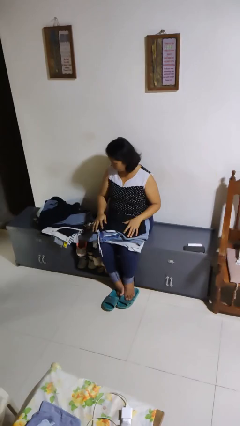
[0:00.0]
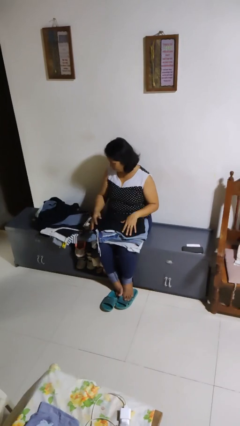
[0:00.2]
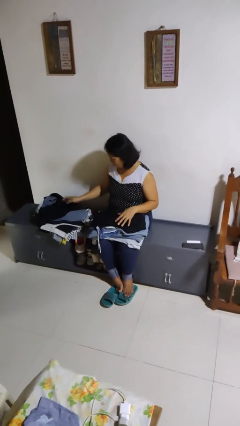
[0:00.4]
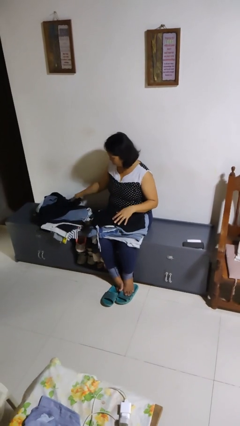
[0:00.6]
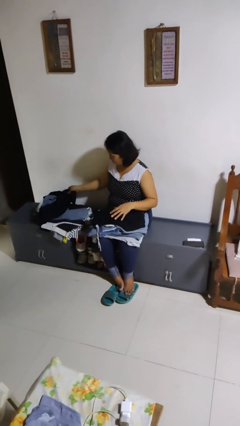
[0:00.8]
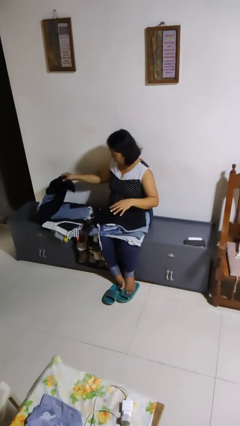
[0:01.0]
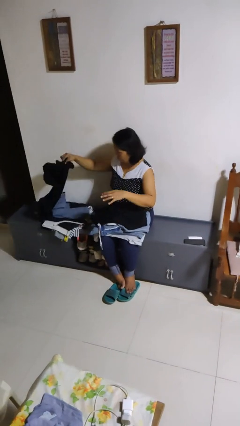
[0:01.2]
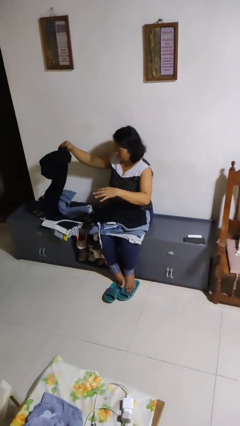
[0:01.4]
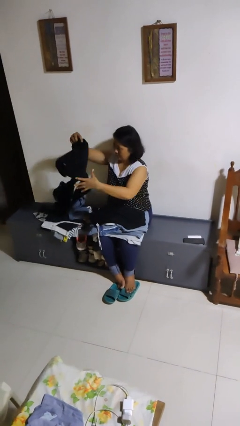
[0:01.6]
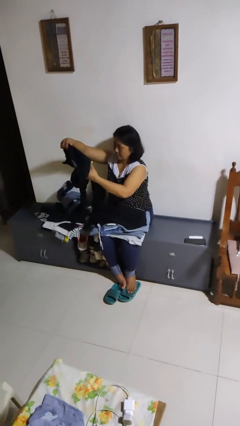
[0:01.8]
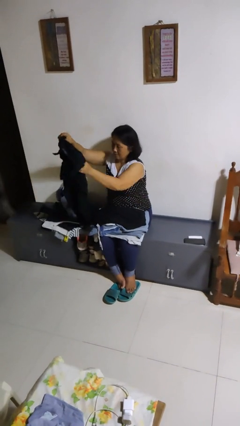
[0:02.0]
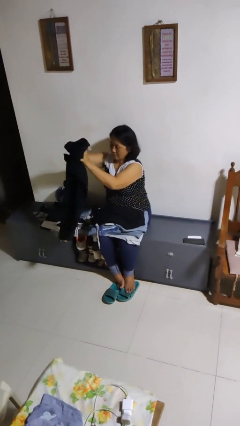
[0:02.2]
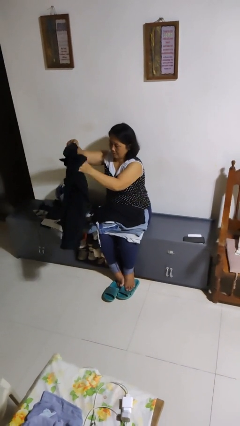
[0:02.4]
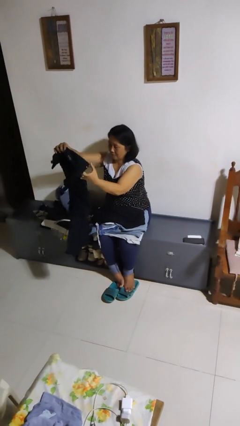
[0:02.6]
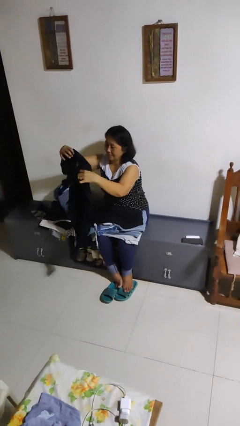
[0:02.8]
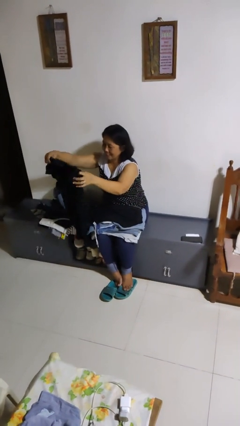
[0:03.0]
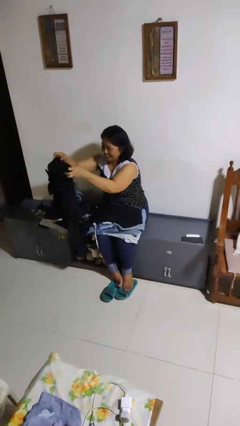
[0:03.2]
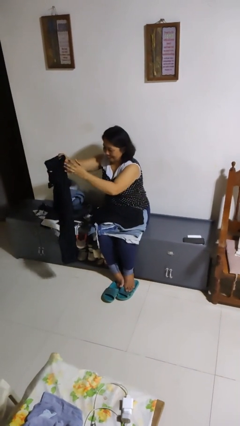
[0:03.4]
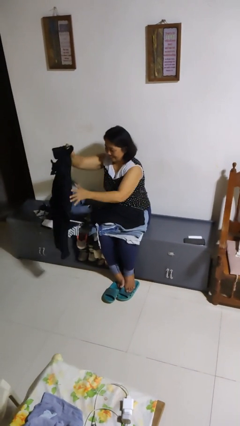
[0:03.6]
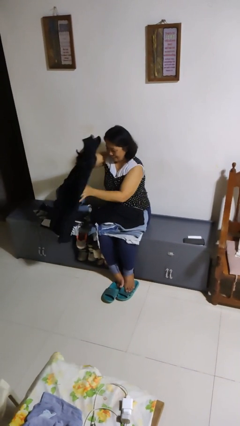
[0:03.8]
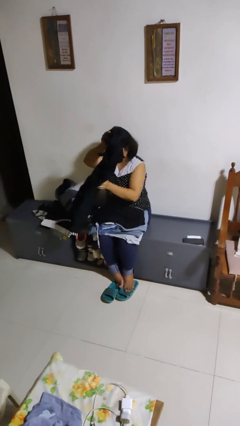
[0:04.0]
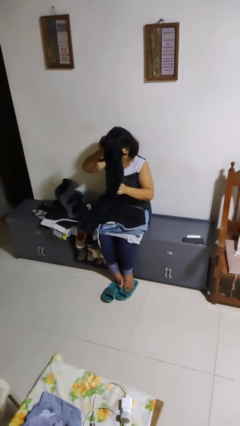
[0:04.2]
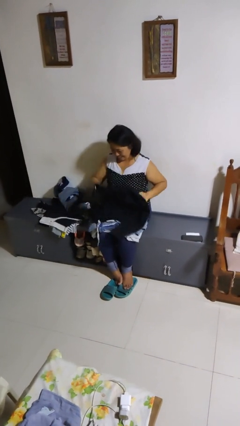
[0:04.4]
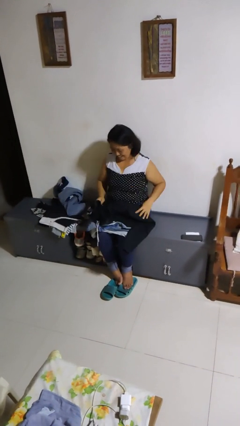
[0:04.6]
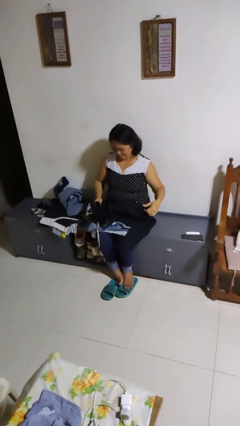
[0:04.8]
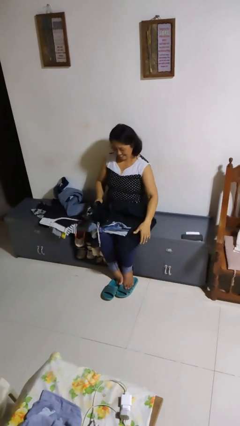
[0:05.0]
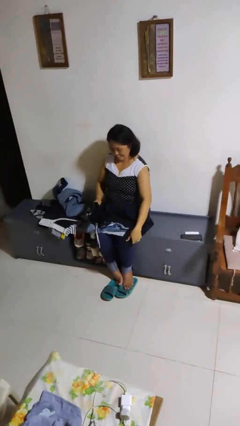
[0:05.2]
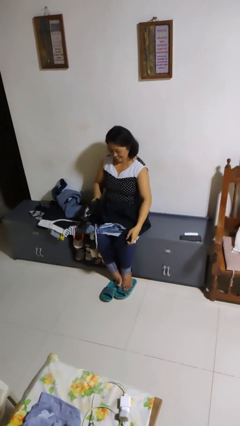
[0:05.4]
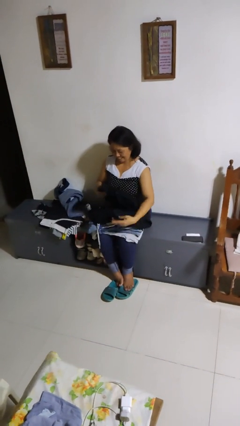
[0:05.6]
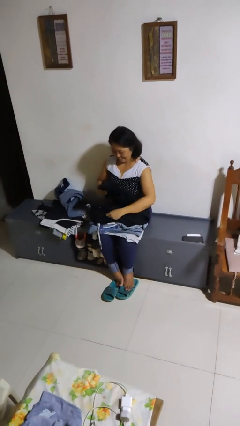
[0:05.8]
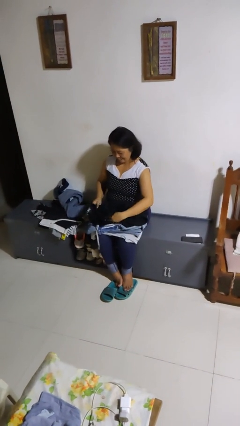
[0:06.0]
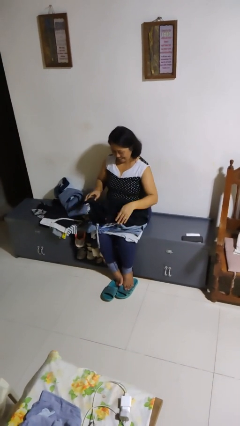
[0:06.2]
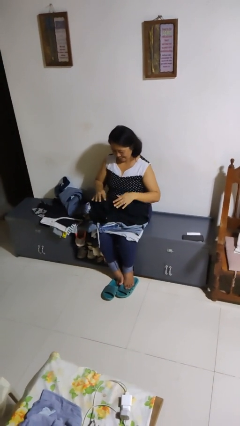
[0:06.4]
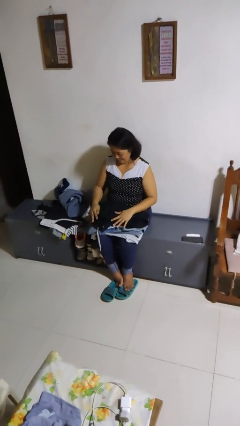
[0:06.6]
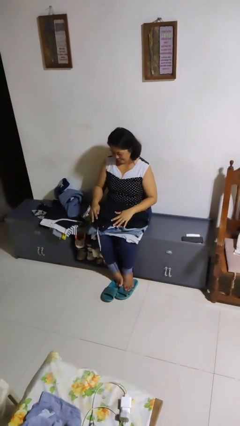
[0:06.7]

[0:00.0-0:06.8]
person folds pants

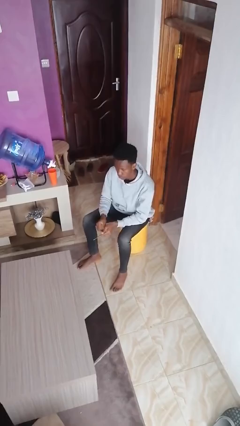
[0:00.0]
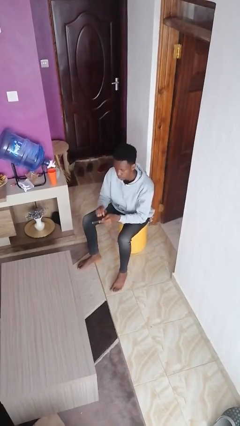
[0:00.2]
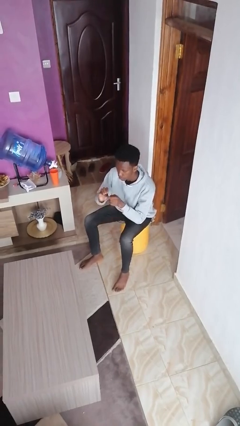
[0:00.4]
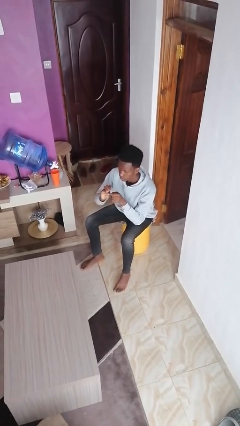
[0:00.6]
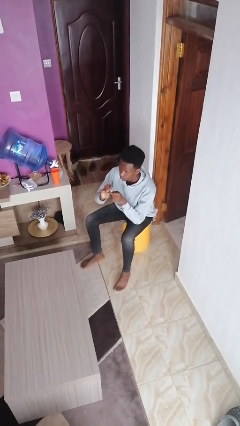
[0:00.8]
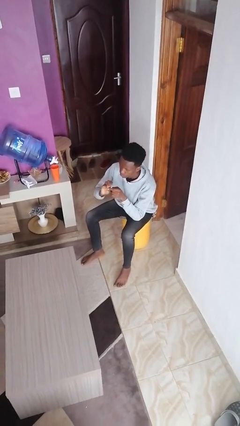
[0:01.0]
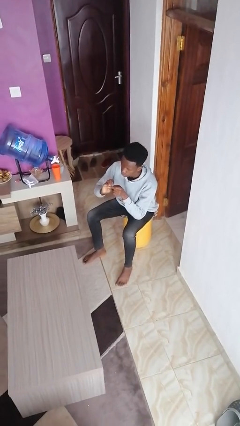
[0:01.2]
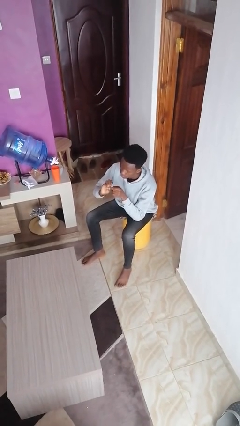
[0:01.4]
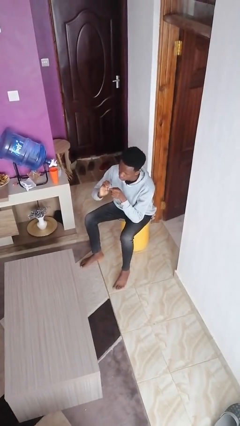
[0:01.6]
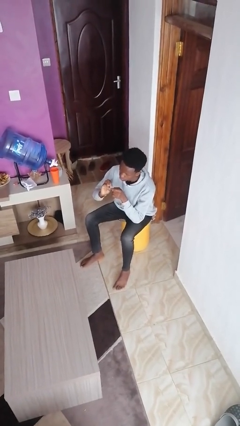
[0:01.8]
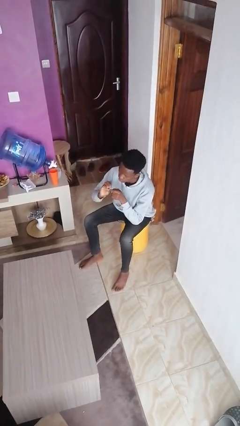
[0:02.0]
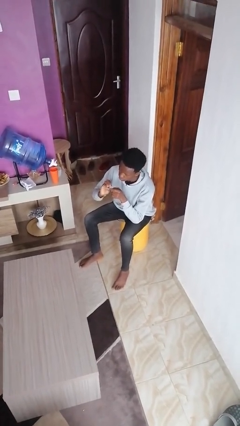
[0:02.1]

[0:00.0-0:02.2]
person files fingernails

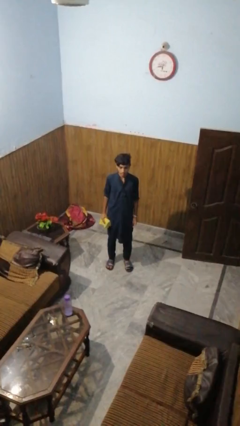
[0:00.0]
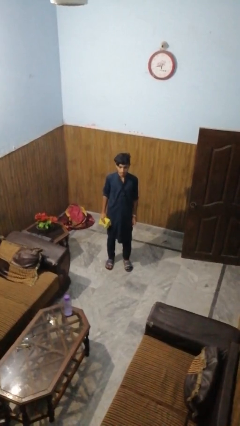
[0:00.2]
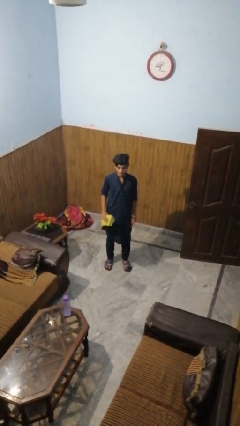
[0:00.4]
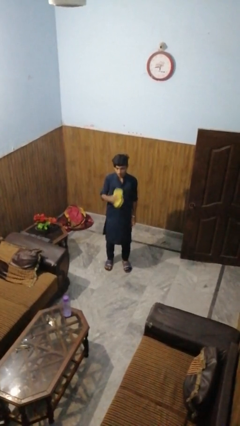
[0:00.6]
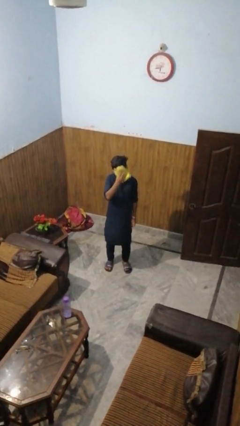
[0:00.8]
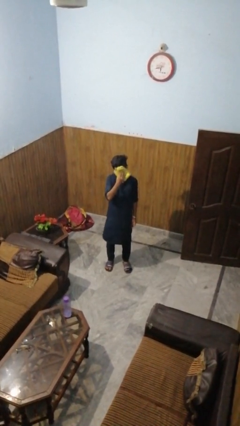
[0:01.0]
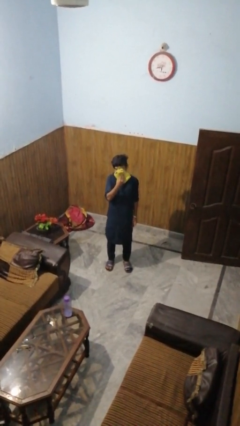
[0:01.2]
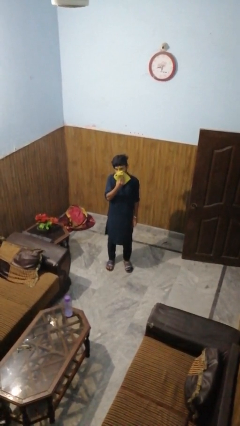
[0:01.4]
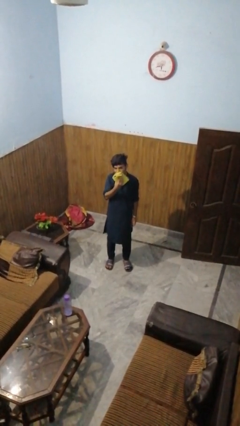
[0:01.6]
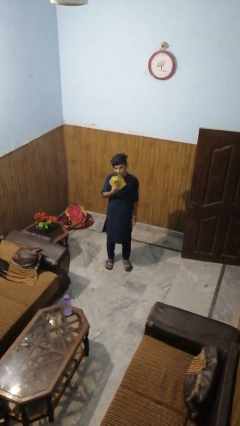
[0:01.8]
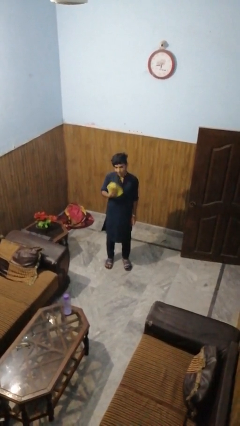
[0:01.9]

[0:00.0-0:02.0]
person wipes mouth with napkin

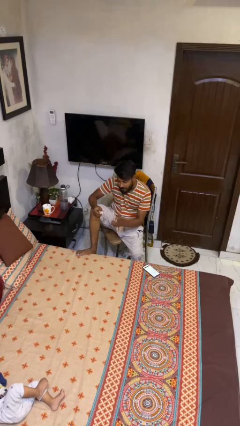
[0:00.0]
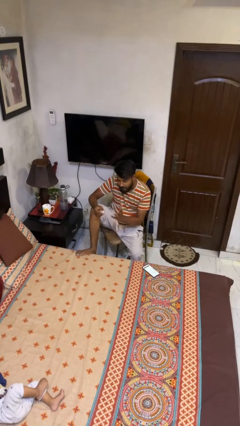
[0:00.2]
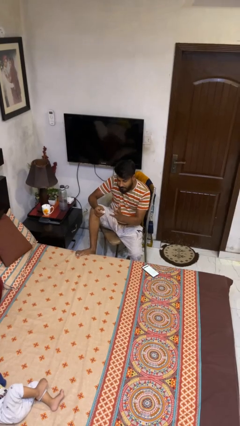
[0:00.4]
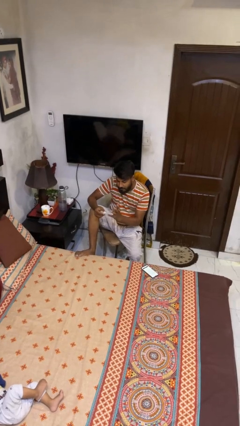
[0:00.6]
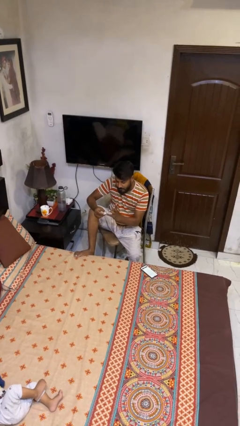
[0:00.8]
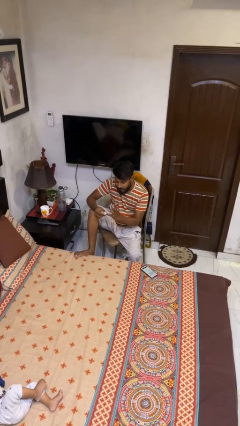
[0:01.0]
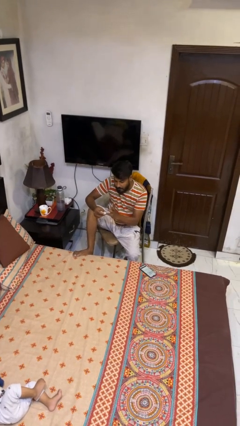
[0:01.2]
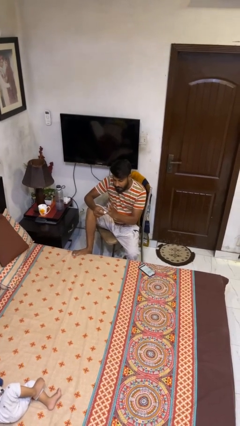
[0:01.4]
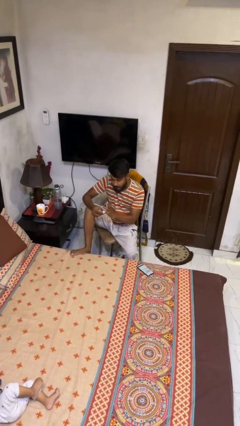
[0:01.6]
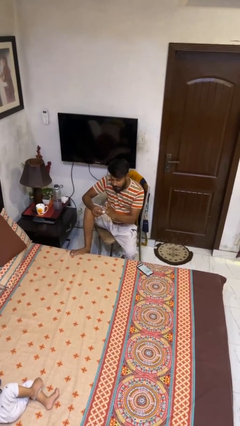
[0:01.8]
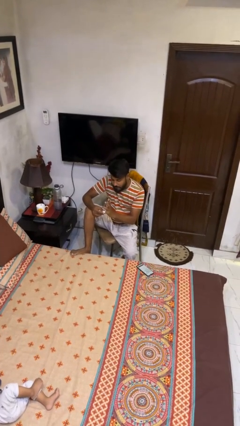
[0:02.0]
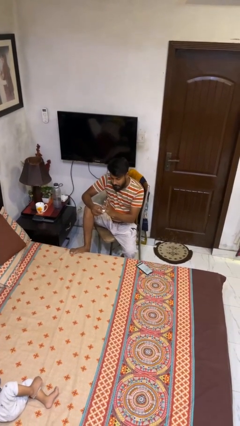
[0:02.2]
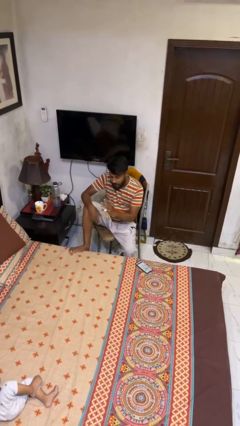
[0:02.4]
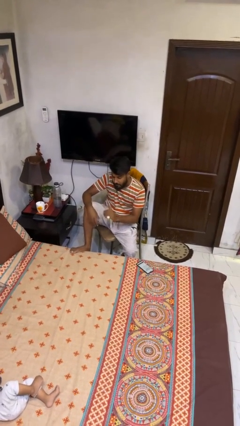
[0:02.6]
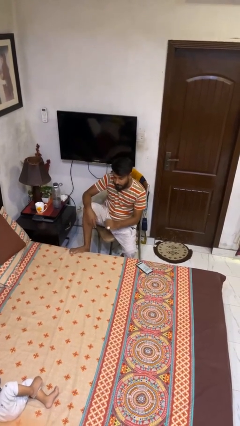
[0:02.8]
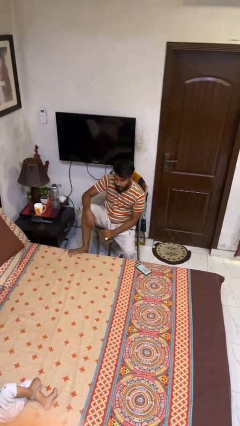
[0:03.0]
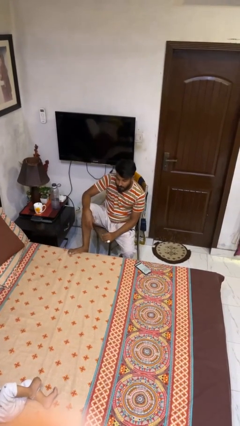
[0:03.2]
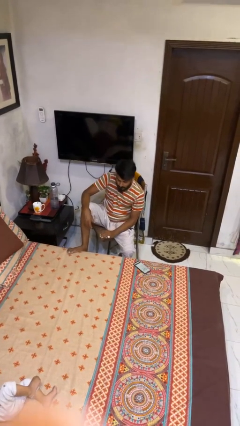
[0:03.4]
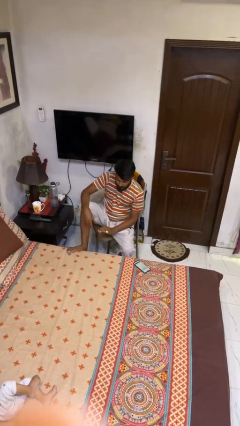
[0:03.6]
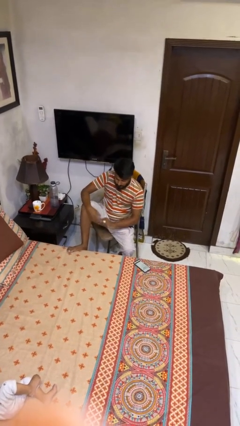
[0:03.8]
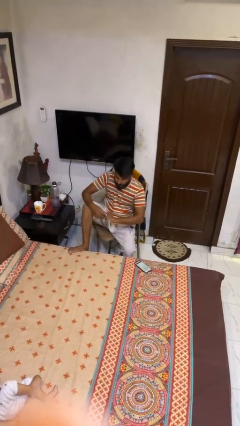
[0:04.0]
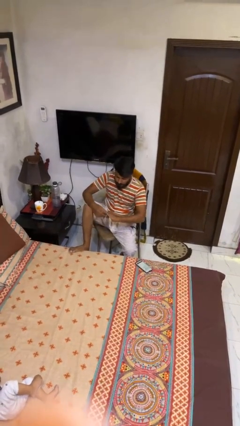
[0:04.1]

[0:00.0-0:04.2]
person puts on ring

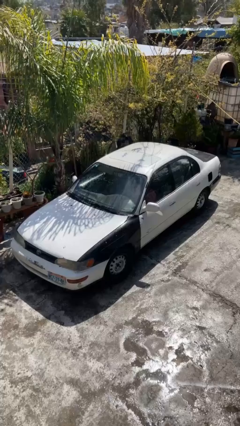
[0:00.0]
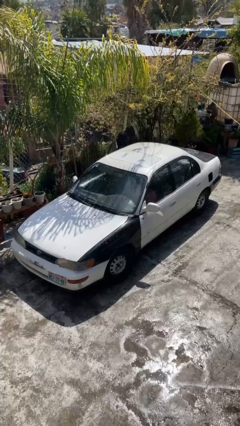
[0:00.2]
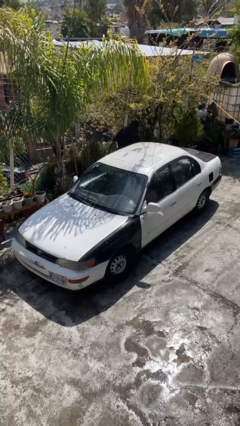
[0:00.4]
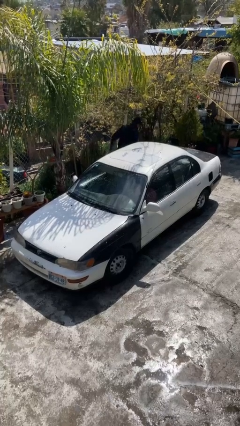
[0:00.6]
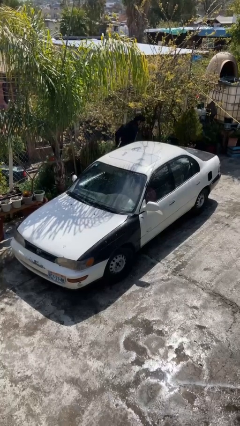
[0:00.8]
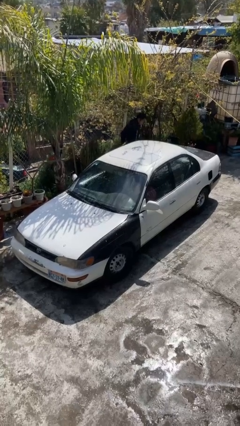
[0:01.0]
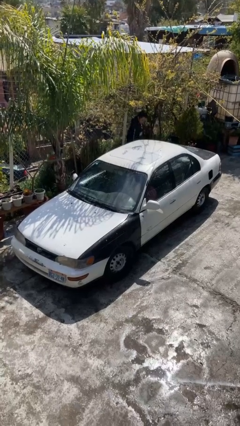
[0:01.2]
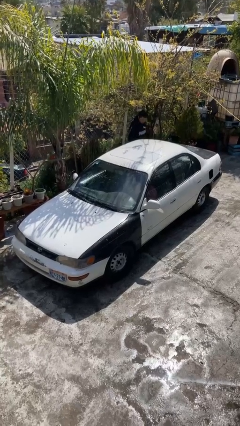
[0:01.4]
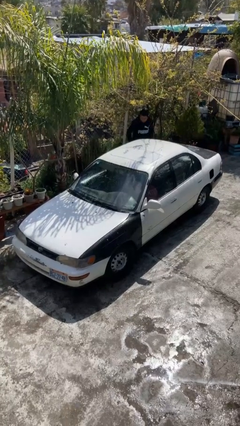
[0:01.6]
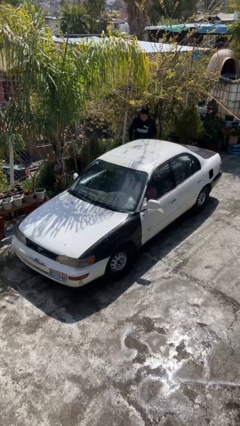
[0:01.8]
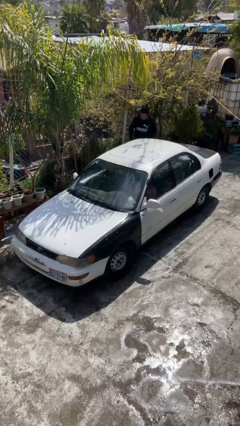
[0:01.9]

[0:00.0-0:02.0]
car drops off person

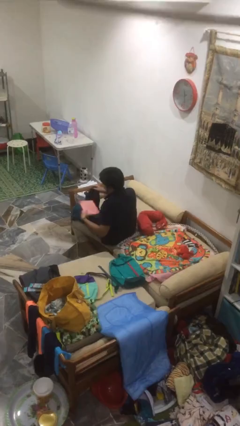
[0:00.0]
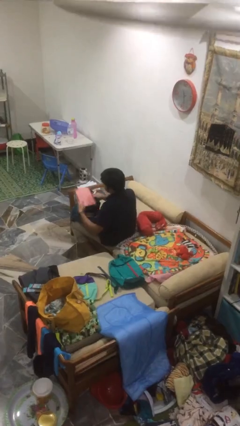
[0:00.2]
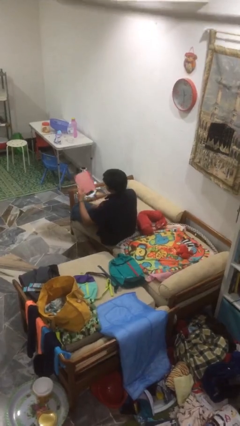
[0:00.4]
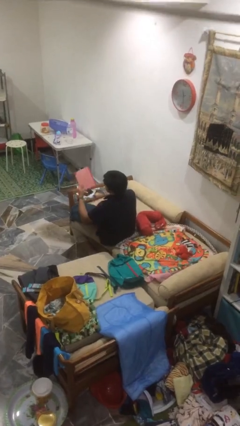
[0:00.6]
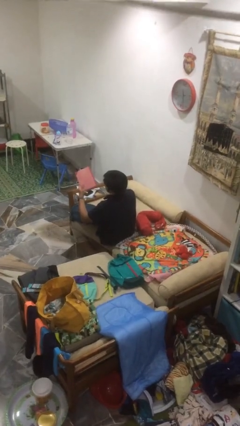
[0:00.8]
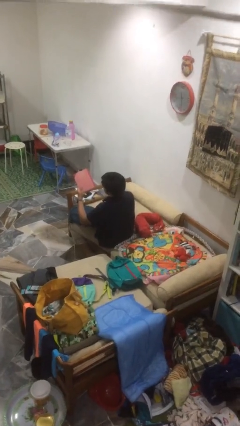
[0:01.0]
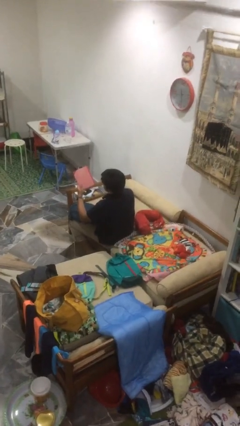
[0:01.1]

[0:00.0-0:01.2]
person takes object from bag
